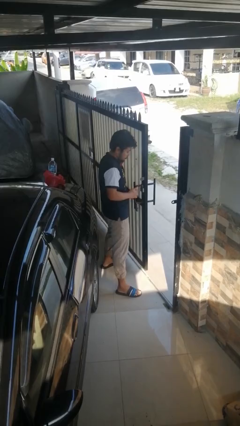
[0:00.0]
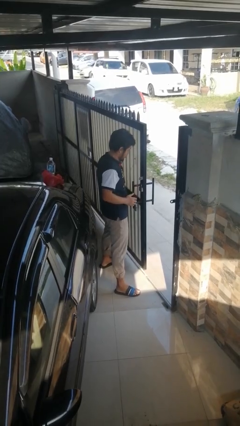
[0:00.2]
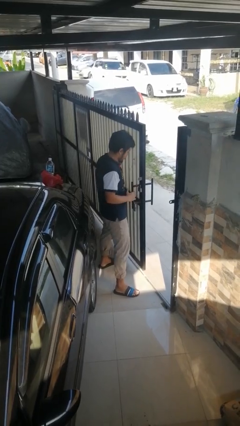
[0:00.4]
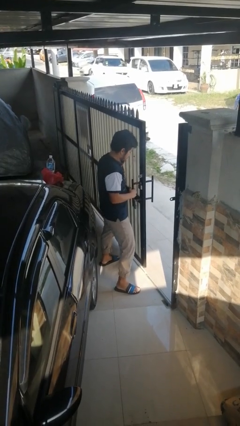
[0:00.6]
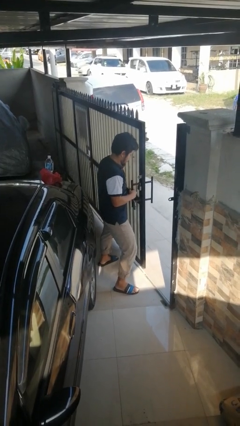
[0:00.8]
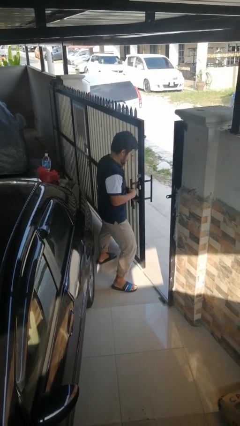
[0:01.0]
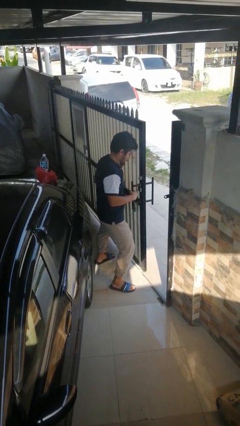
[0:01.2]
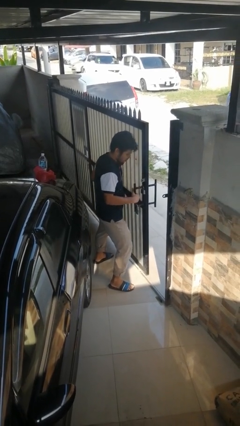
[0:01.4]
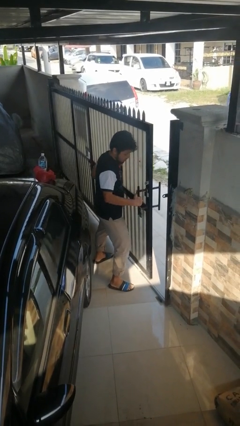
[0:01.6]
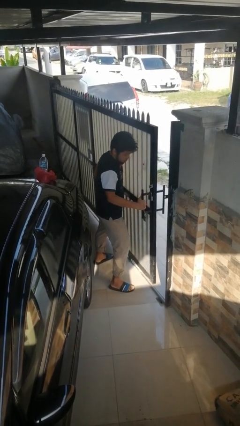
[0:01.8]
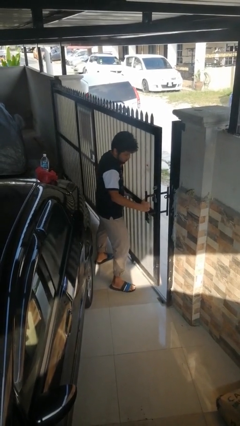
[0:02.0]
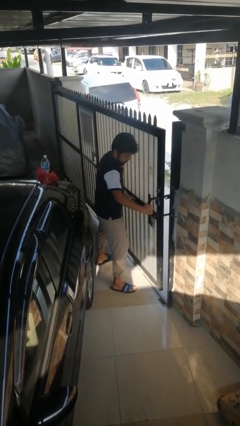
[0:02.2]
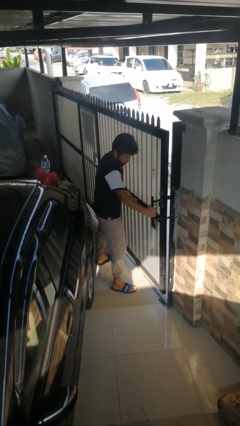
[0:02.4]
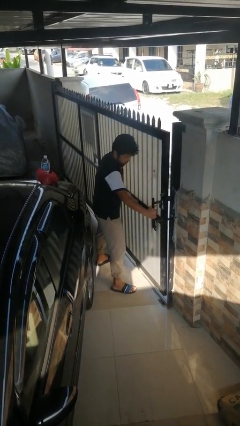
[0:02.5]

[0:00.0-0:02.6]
person closes sliding door

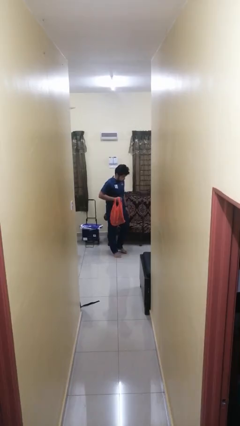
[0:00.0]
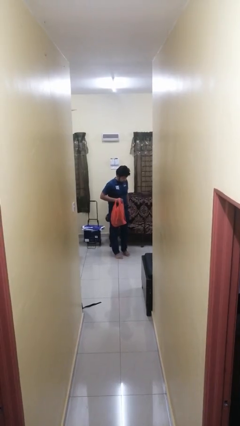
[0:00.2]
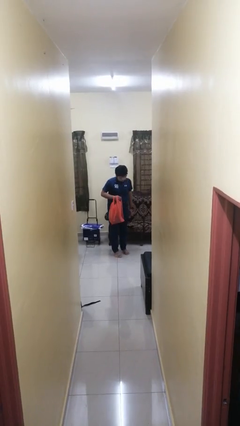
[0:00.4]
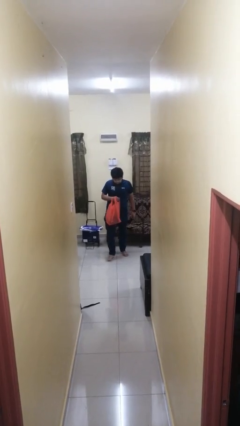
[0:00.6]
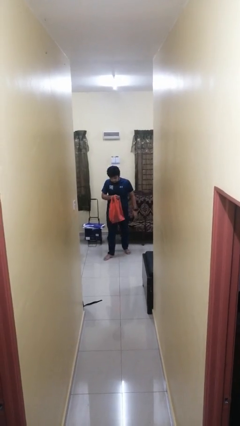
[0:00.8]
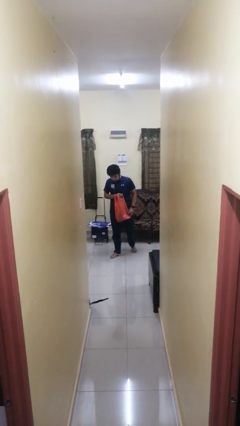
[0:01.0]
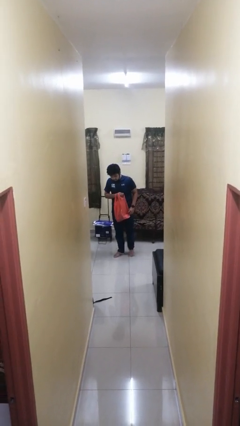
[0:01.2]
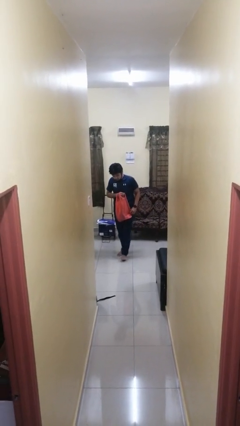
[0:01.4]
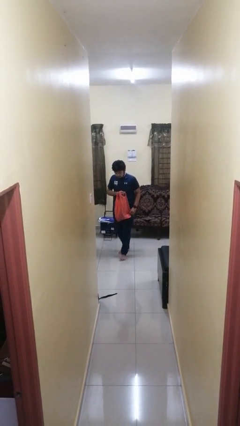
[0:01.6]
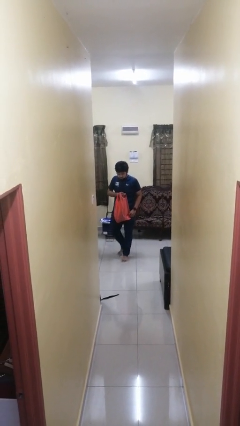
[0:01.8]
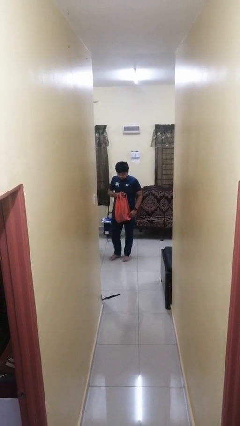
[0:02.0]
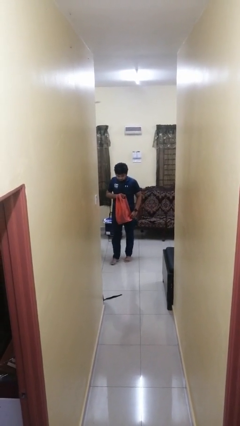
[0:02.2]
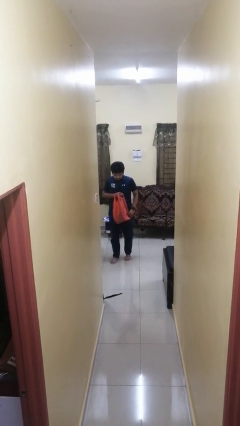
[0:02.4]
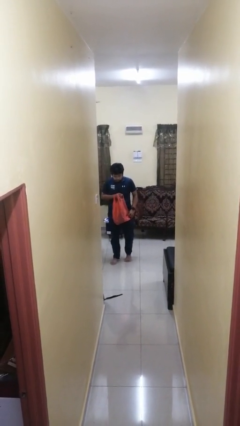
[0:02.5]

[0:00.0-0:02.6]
person carries groceries

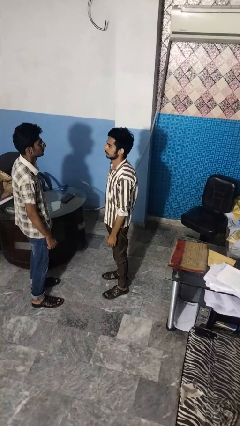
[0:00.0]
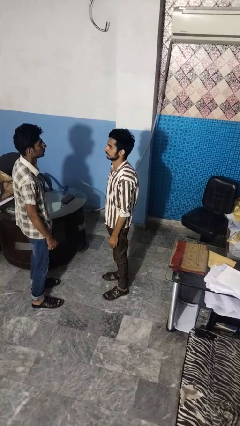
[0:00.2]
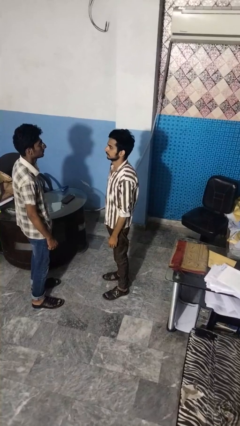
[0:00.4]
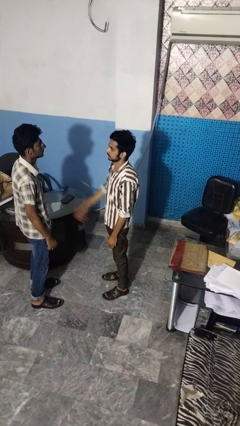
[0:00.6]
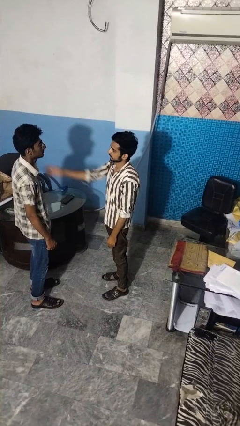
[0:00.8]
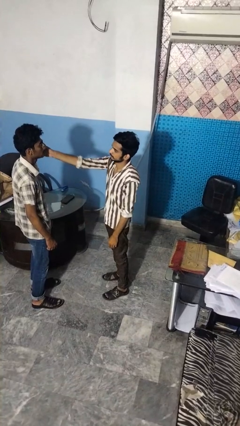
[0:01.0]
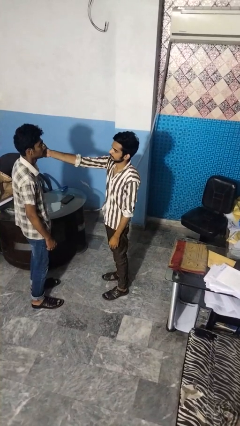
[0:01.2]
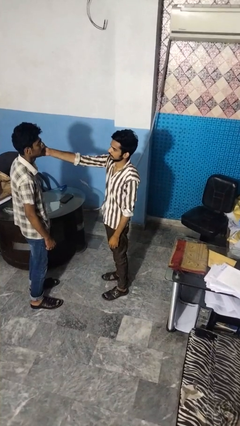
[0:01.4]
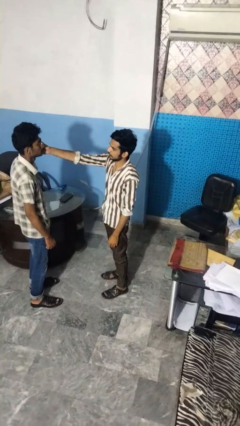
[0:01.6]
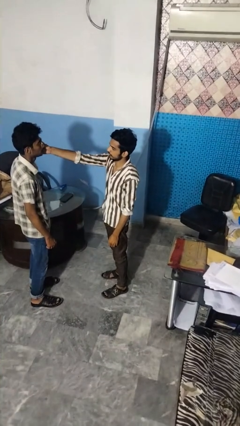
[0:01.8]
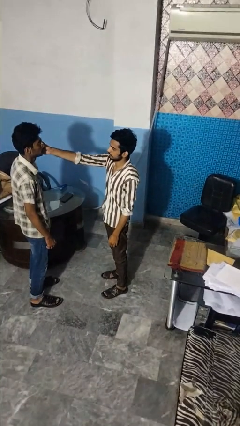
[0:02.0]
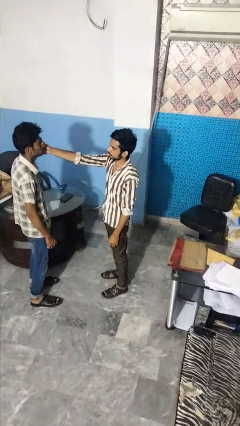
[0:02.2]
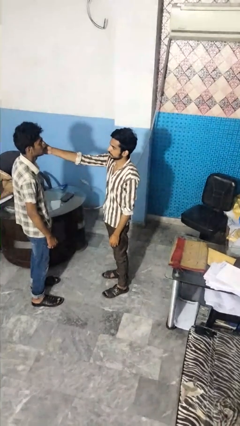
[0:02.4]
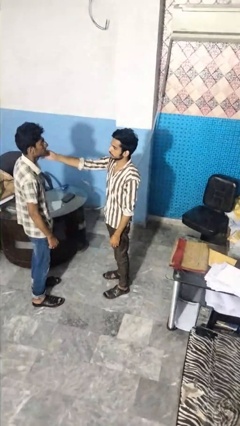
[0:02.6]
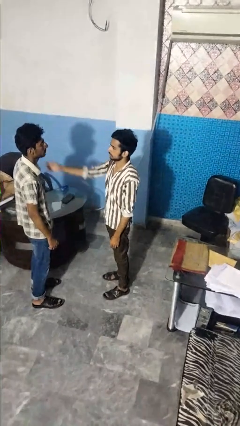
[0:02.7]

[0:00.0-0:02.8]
person touches face of person

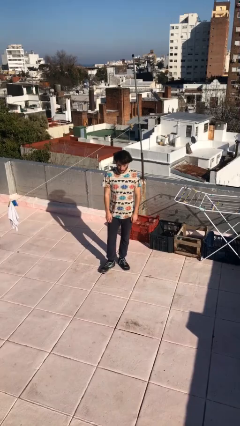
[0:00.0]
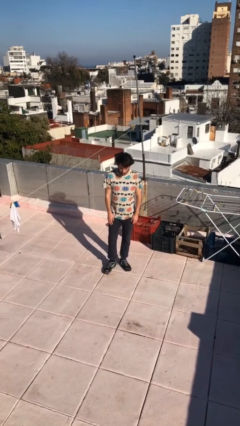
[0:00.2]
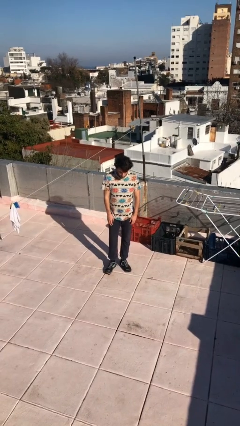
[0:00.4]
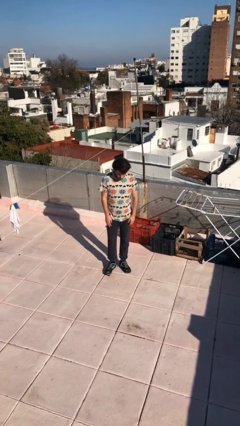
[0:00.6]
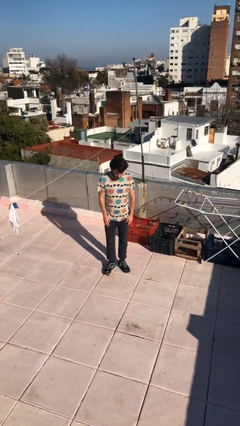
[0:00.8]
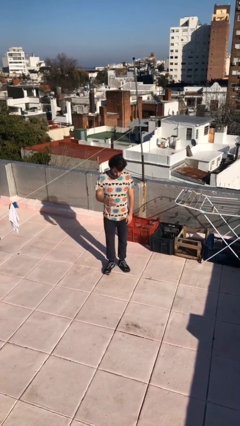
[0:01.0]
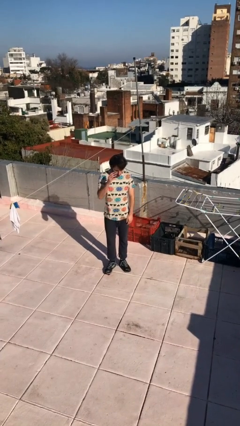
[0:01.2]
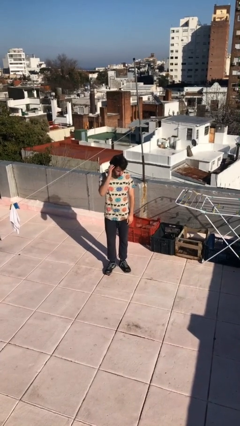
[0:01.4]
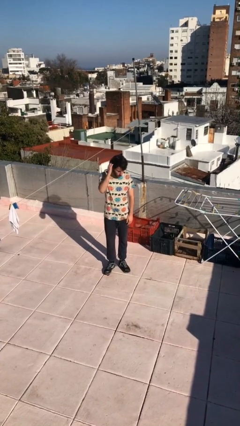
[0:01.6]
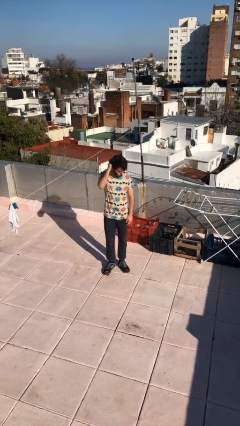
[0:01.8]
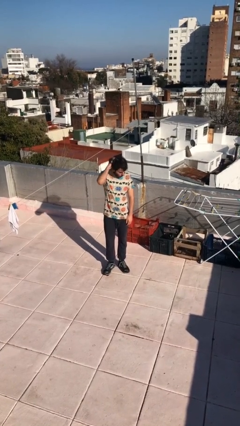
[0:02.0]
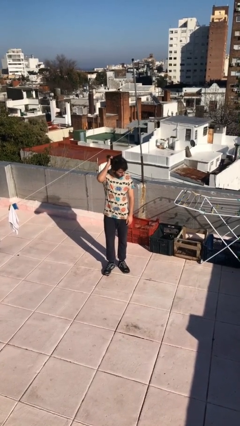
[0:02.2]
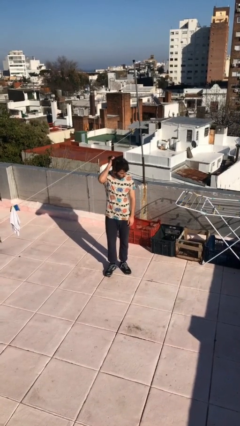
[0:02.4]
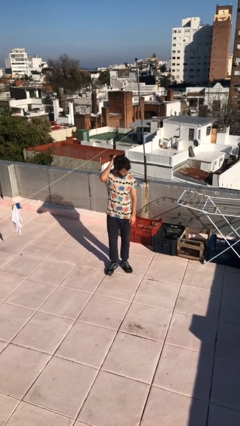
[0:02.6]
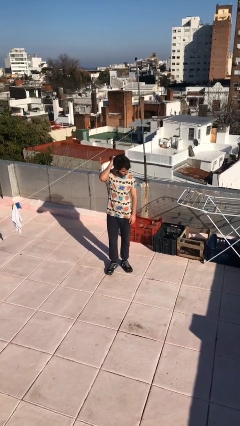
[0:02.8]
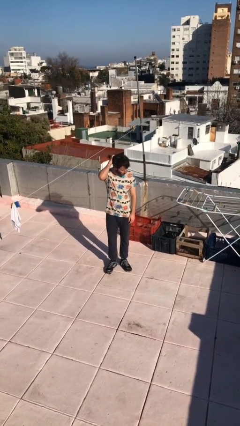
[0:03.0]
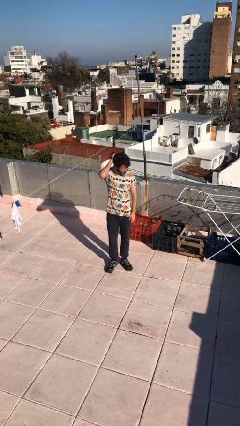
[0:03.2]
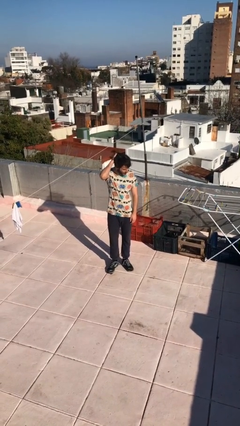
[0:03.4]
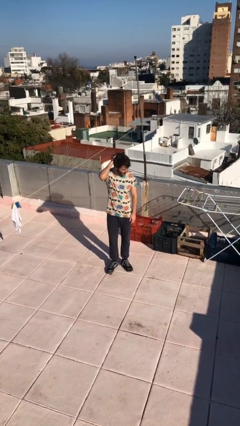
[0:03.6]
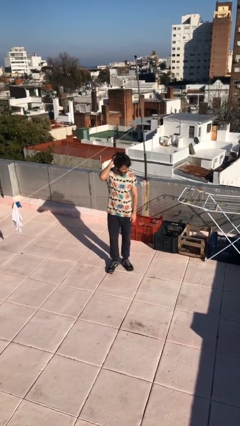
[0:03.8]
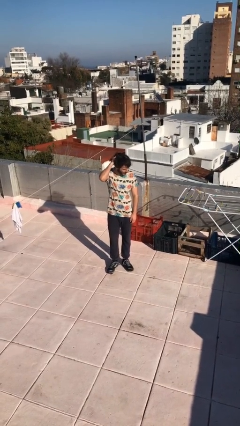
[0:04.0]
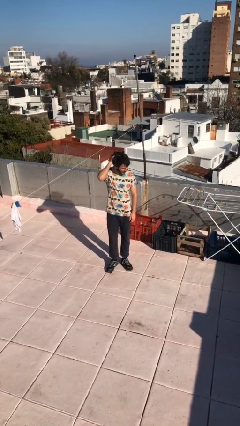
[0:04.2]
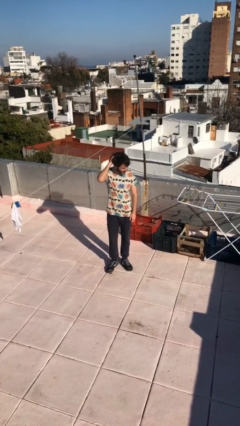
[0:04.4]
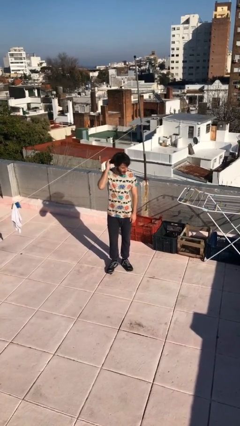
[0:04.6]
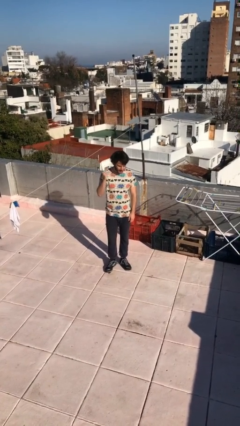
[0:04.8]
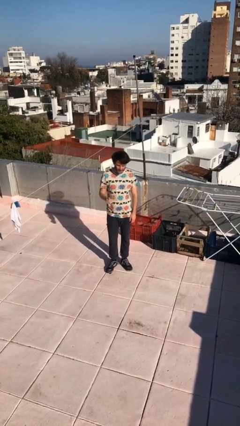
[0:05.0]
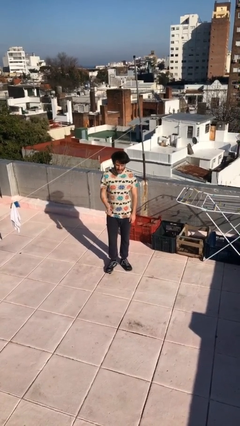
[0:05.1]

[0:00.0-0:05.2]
person scratches face

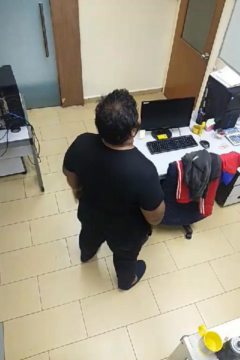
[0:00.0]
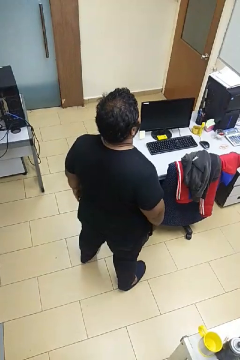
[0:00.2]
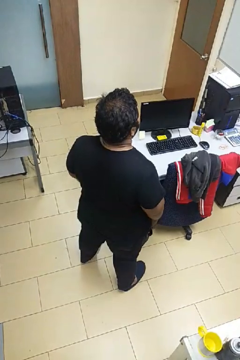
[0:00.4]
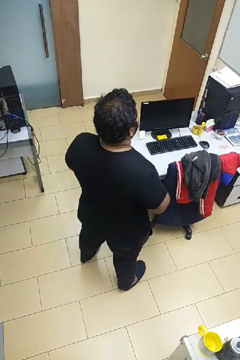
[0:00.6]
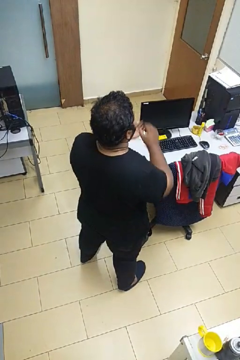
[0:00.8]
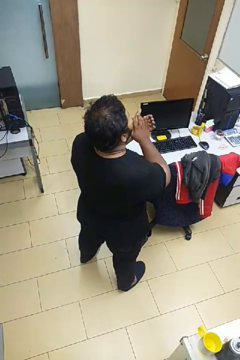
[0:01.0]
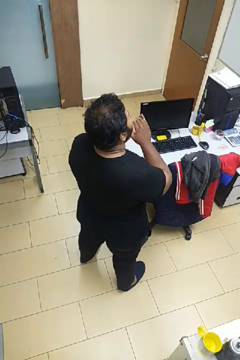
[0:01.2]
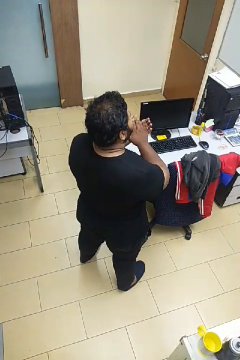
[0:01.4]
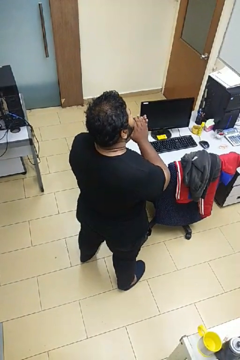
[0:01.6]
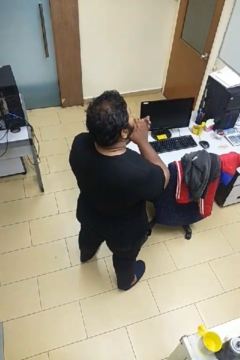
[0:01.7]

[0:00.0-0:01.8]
person claps hands

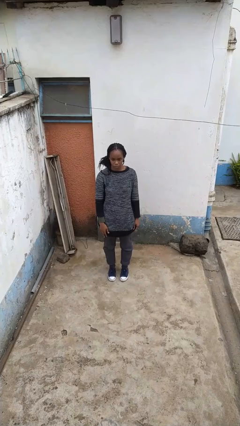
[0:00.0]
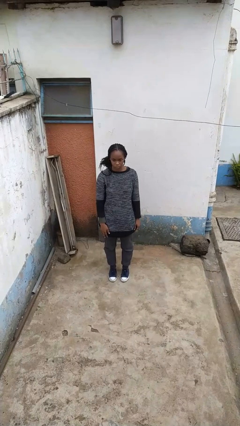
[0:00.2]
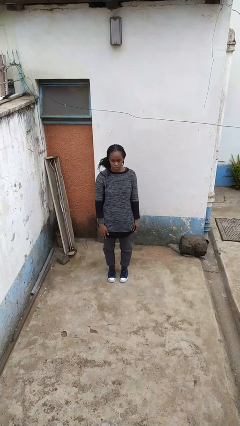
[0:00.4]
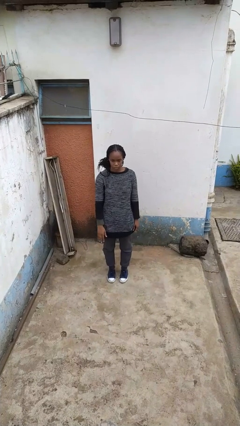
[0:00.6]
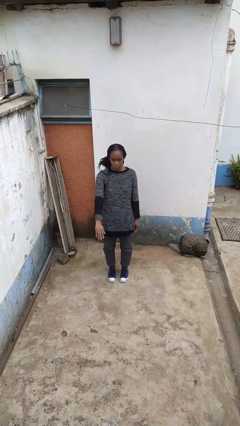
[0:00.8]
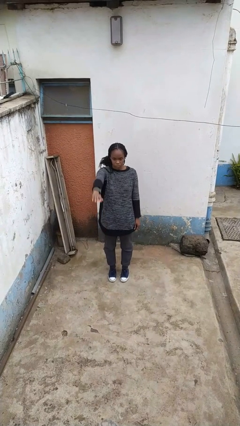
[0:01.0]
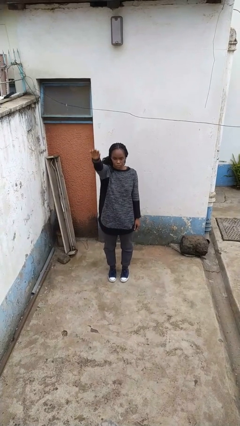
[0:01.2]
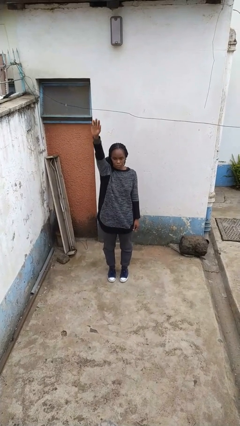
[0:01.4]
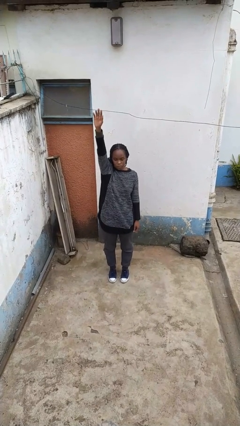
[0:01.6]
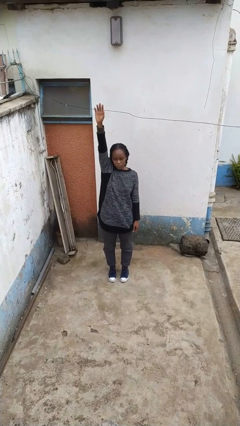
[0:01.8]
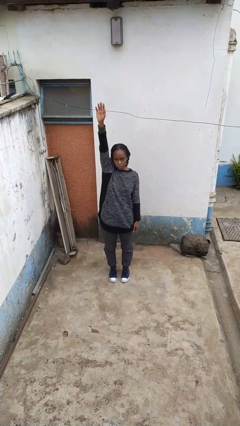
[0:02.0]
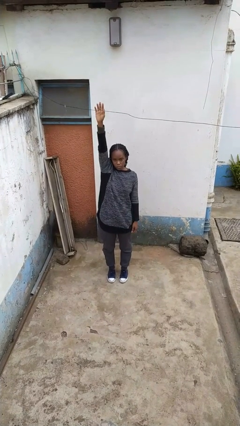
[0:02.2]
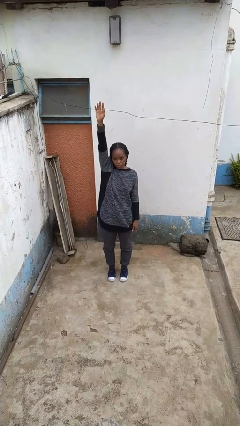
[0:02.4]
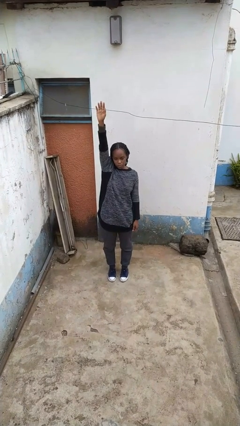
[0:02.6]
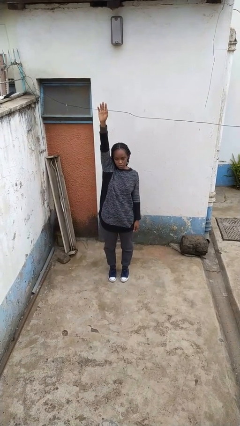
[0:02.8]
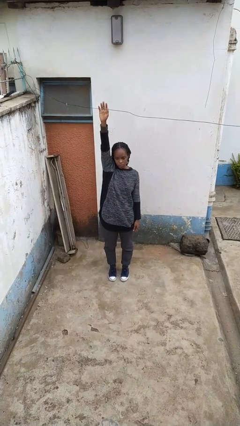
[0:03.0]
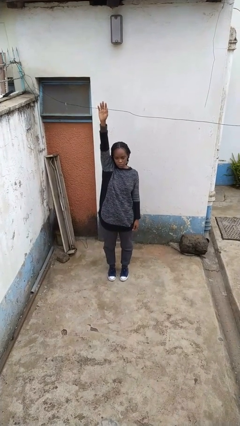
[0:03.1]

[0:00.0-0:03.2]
person gestures raise hand
